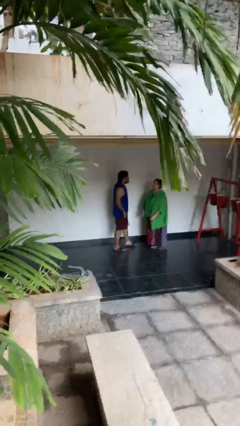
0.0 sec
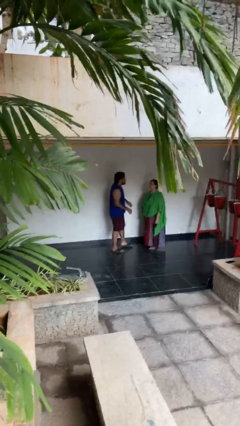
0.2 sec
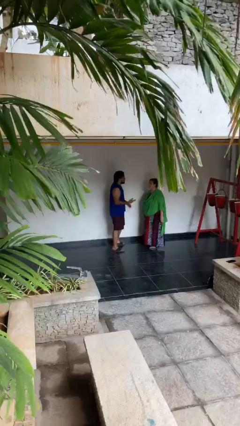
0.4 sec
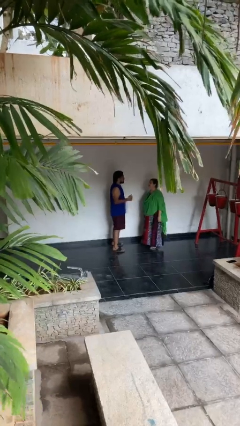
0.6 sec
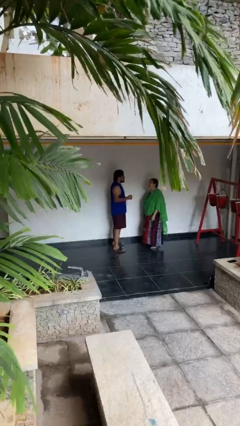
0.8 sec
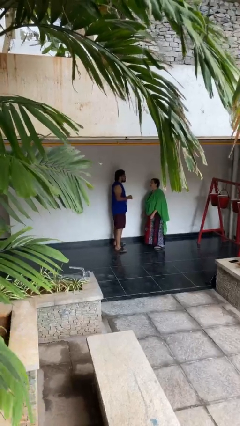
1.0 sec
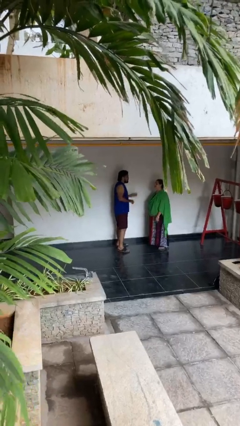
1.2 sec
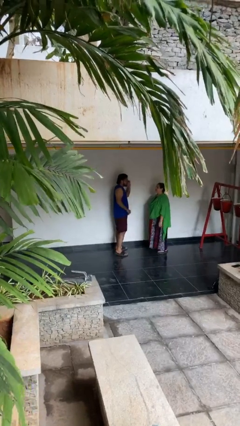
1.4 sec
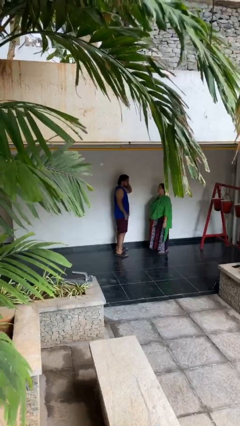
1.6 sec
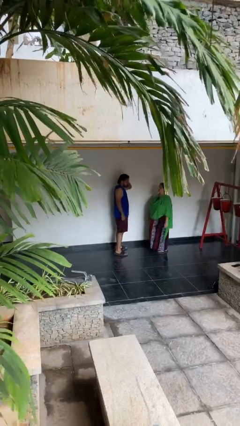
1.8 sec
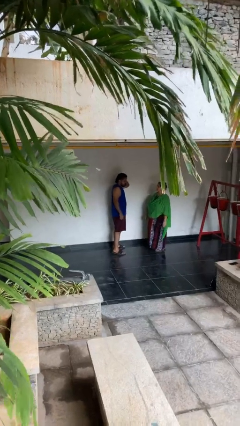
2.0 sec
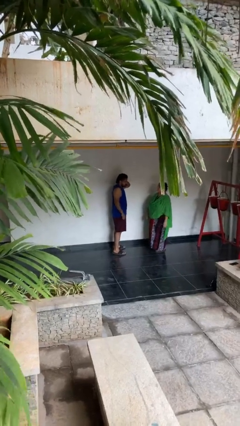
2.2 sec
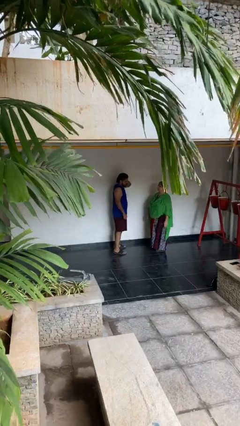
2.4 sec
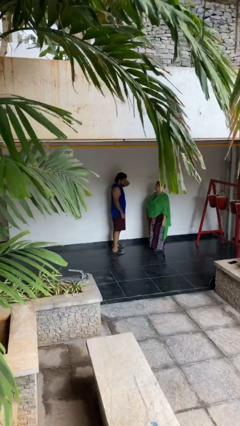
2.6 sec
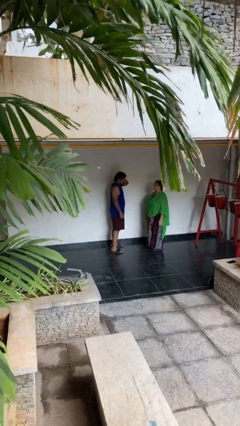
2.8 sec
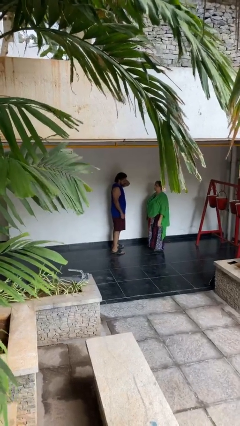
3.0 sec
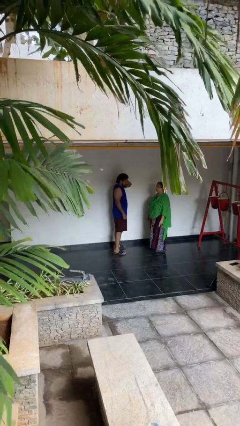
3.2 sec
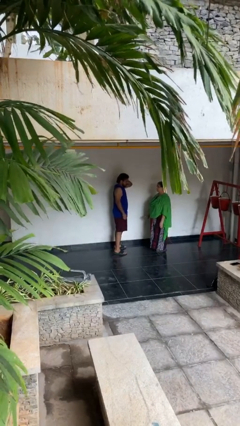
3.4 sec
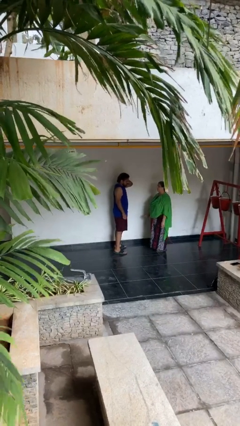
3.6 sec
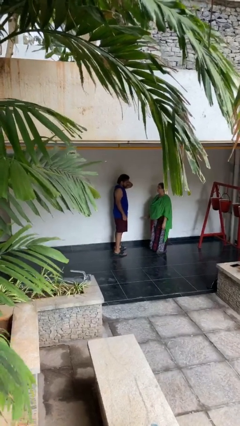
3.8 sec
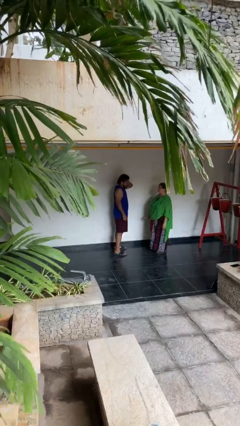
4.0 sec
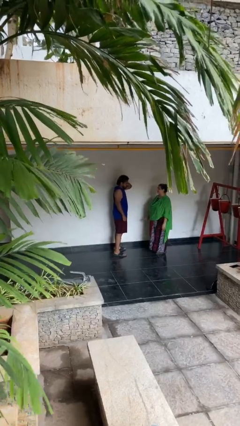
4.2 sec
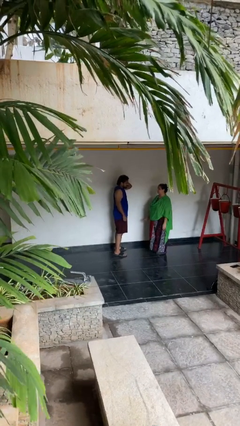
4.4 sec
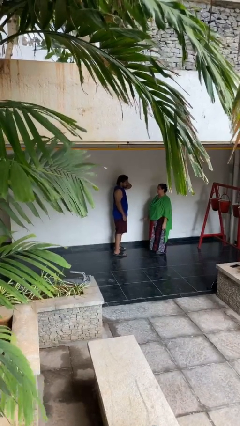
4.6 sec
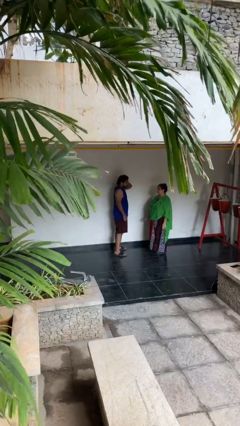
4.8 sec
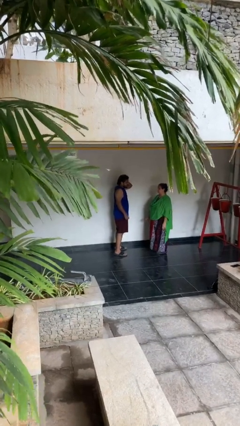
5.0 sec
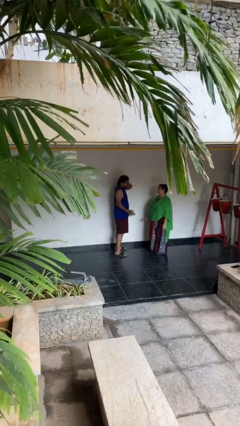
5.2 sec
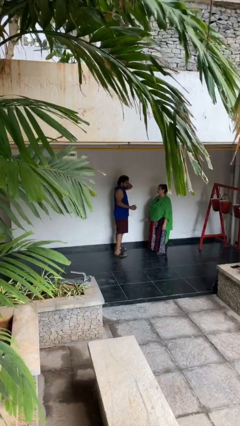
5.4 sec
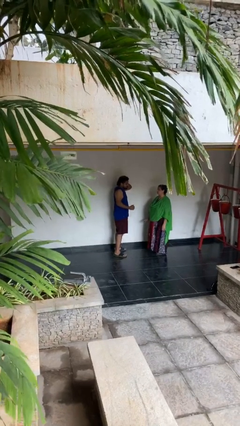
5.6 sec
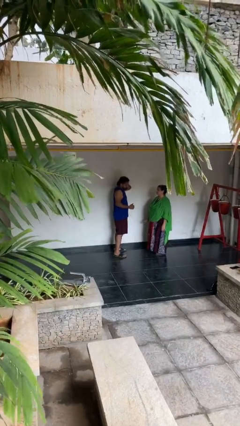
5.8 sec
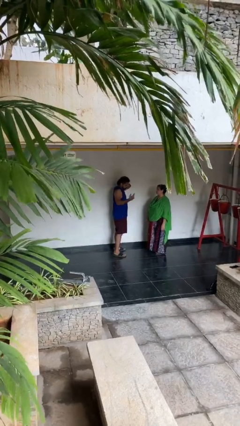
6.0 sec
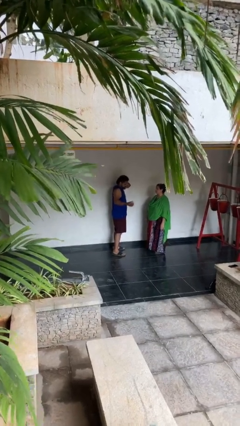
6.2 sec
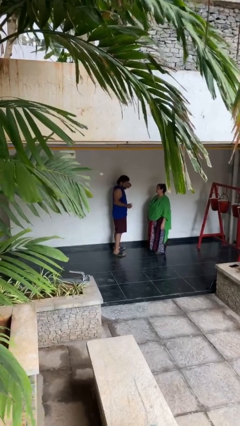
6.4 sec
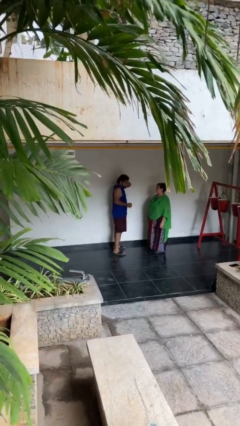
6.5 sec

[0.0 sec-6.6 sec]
person talks to person

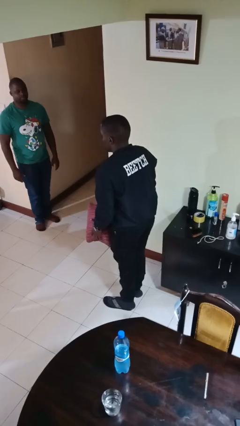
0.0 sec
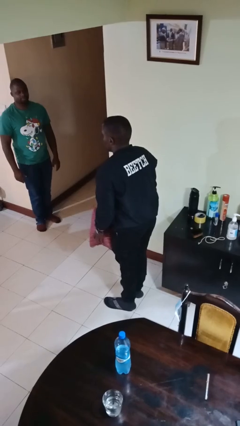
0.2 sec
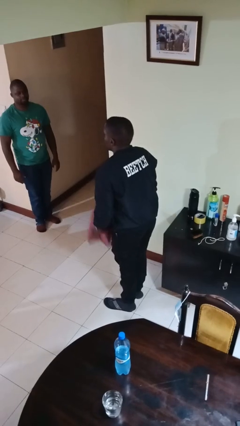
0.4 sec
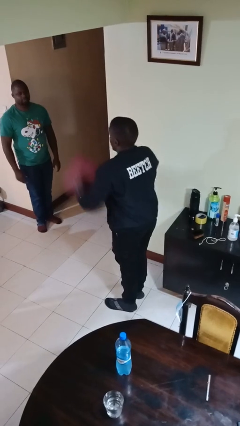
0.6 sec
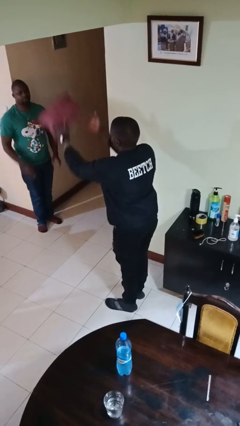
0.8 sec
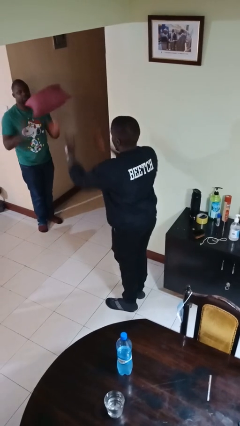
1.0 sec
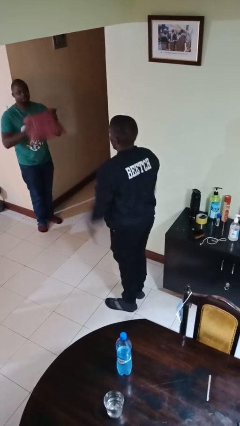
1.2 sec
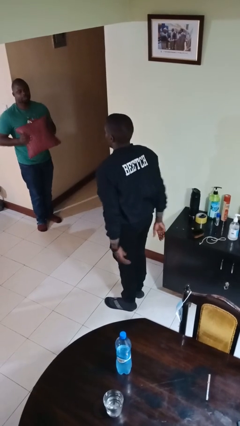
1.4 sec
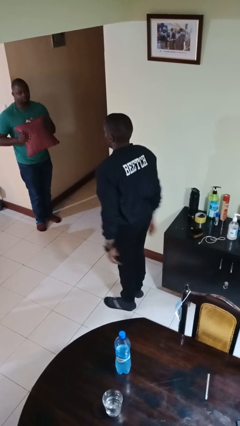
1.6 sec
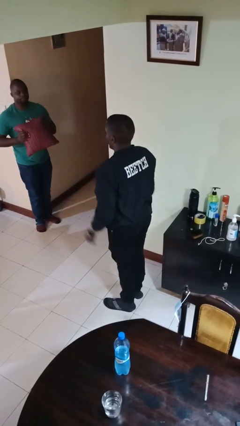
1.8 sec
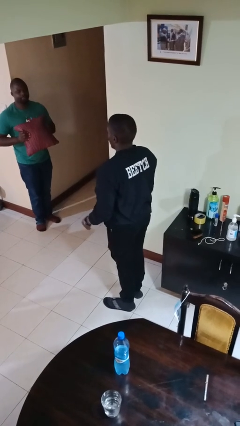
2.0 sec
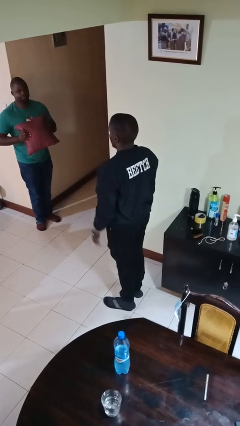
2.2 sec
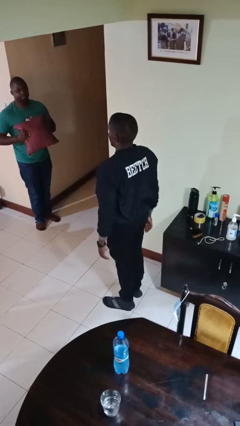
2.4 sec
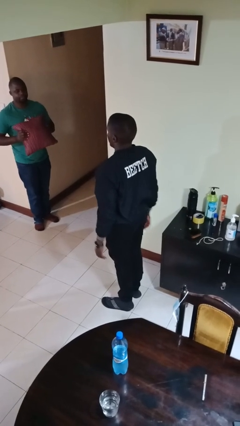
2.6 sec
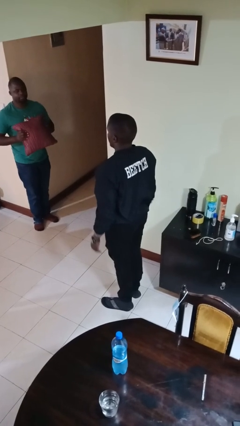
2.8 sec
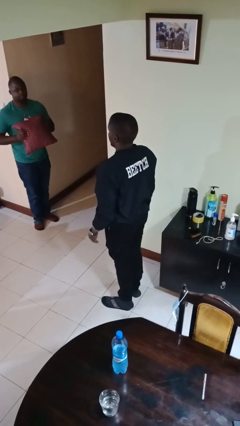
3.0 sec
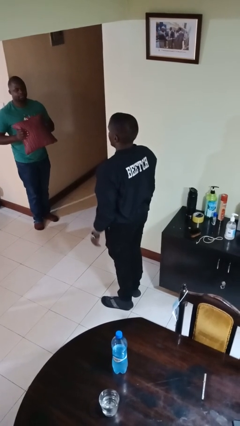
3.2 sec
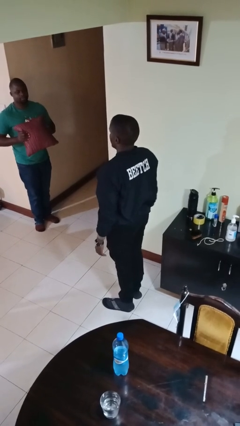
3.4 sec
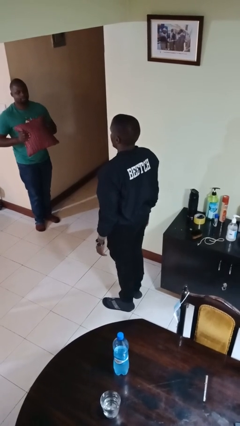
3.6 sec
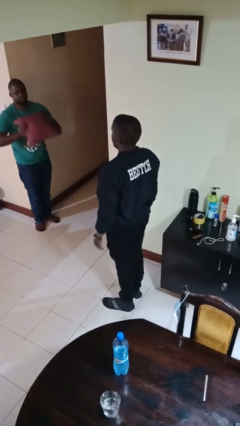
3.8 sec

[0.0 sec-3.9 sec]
person throws object to person

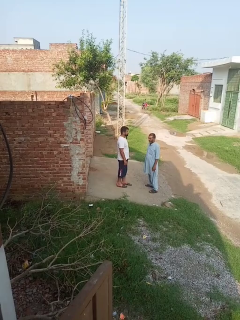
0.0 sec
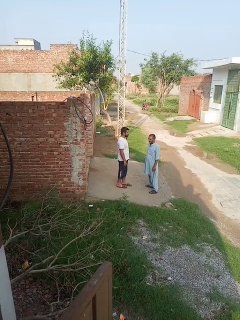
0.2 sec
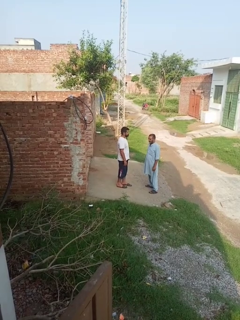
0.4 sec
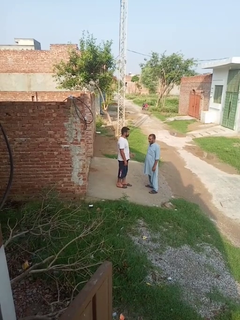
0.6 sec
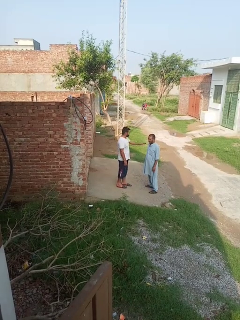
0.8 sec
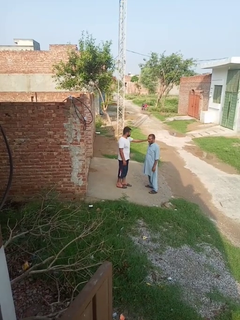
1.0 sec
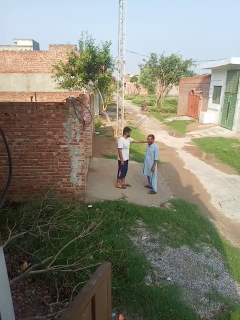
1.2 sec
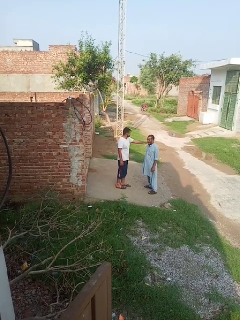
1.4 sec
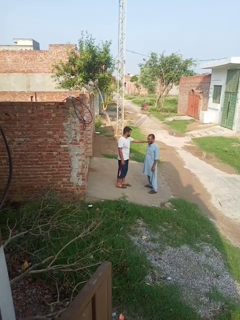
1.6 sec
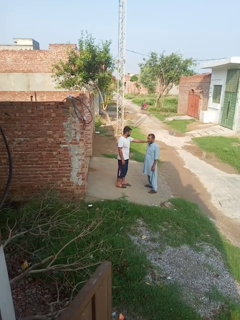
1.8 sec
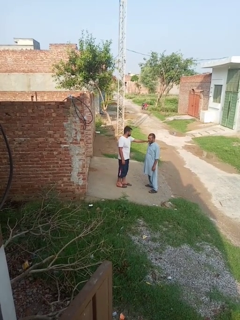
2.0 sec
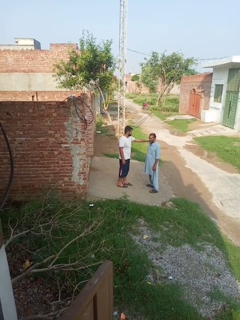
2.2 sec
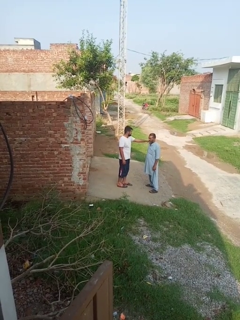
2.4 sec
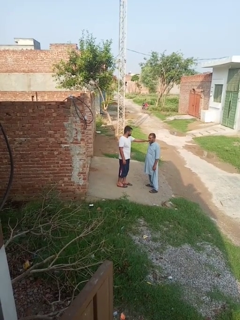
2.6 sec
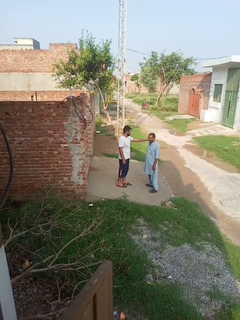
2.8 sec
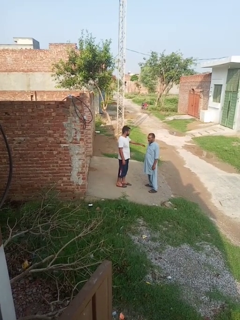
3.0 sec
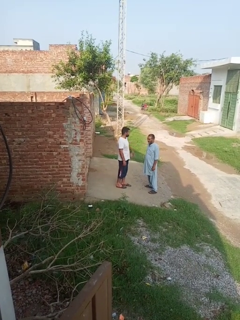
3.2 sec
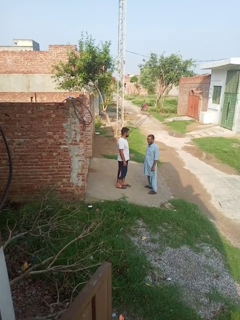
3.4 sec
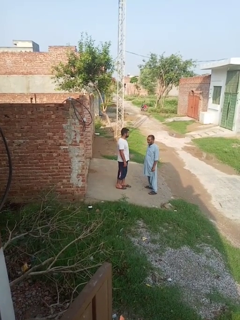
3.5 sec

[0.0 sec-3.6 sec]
person pounds shoulders of person

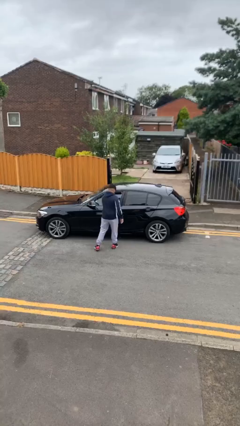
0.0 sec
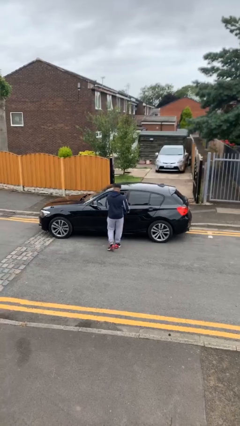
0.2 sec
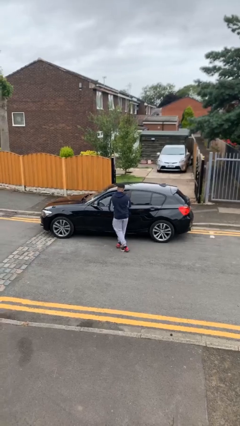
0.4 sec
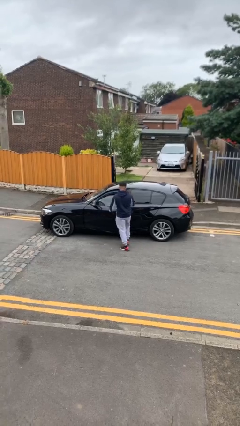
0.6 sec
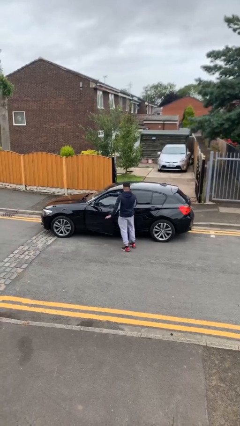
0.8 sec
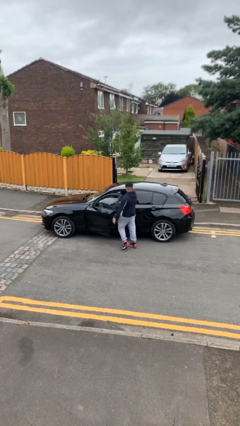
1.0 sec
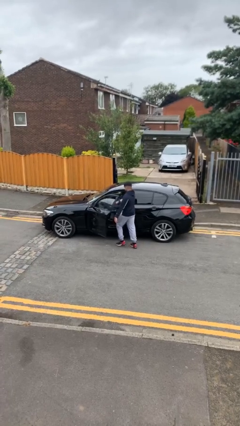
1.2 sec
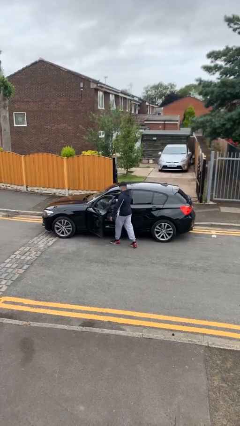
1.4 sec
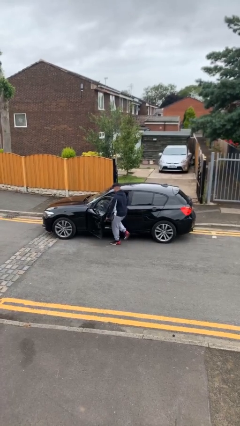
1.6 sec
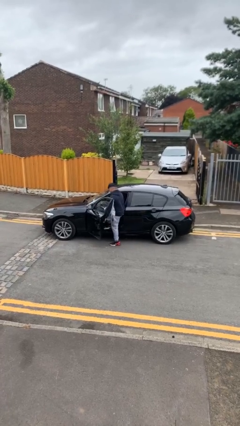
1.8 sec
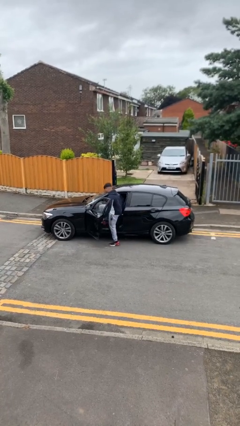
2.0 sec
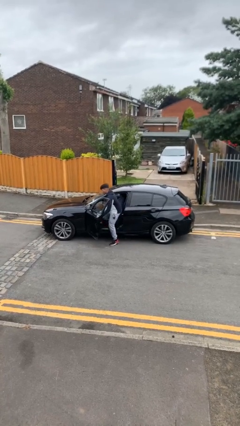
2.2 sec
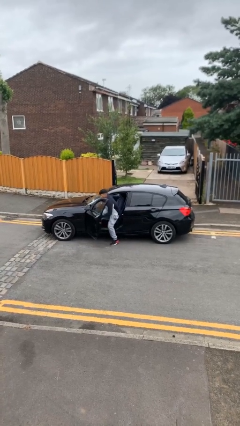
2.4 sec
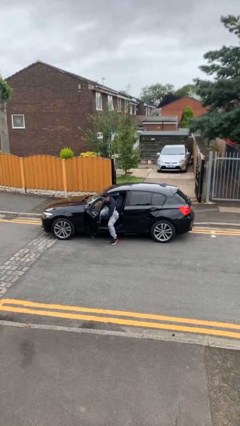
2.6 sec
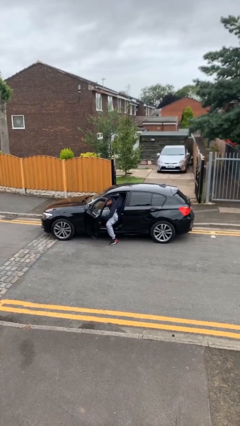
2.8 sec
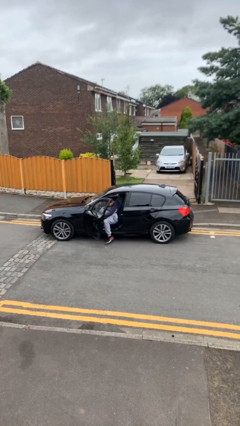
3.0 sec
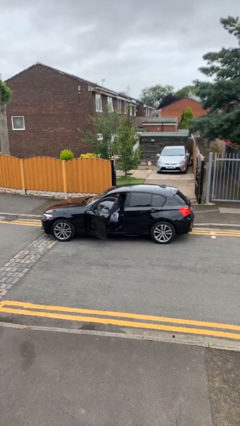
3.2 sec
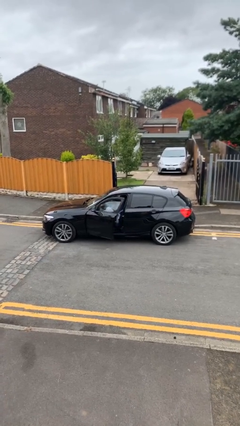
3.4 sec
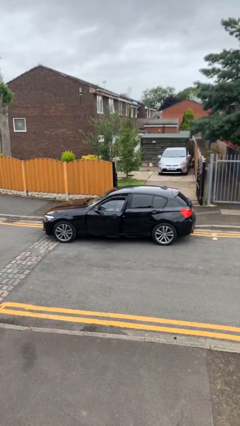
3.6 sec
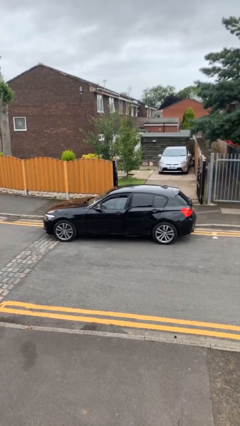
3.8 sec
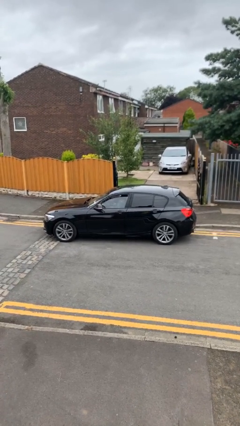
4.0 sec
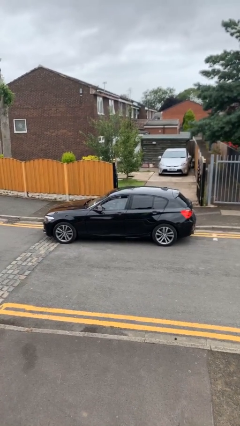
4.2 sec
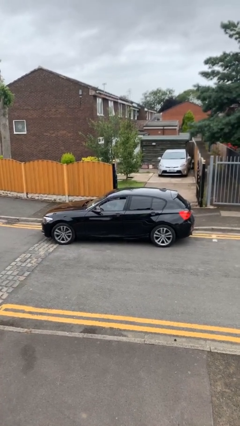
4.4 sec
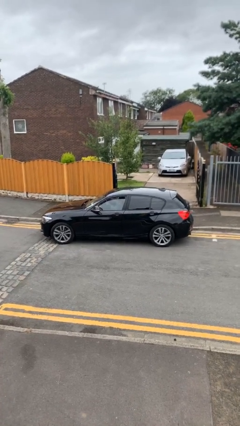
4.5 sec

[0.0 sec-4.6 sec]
car picks up person
